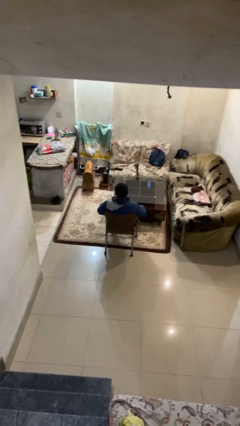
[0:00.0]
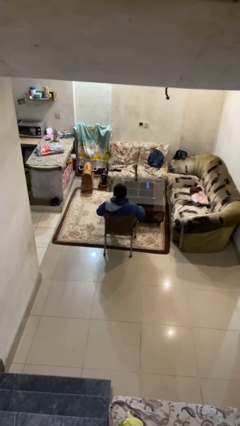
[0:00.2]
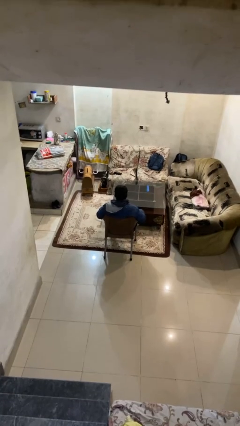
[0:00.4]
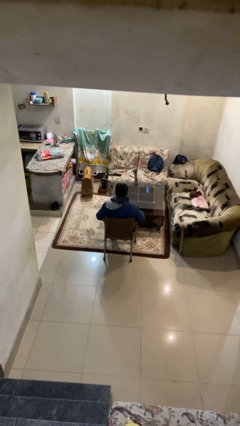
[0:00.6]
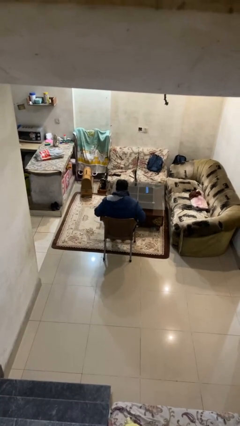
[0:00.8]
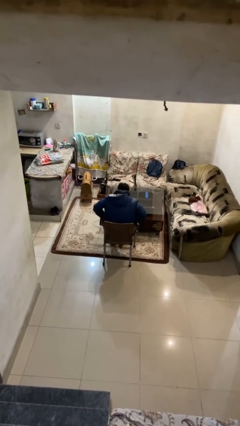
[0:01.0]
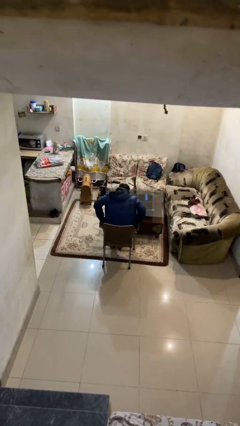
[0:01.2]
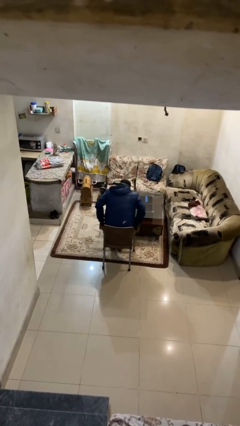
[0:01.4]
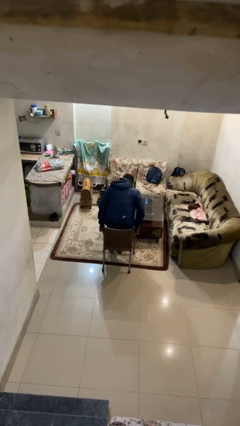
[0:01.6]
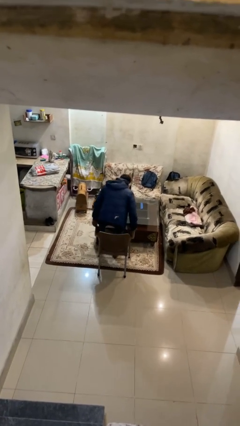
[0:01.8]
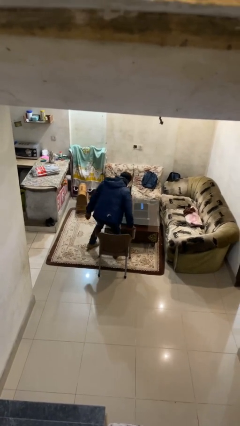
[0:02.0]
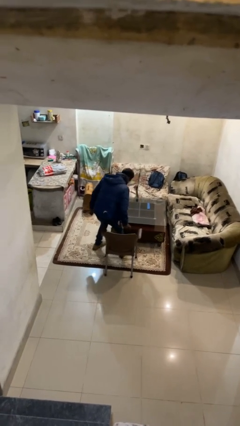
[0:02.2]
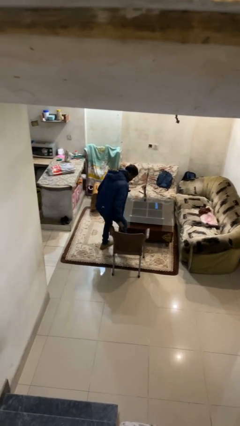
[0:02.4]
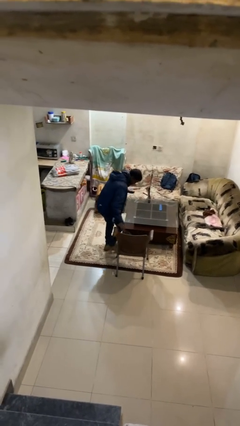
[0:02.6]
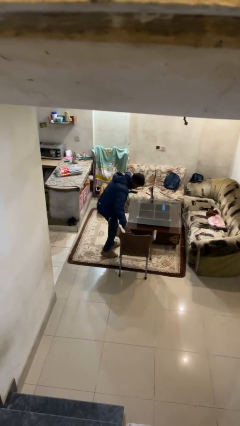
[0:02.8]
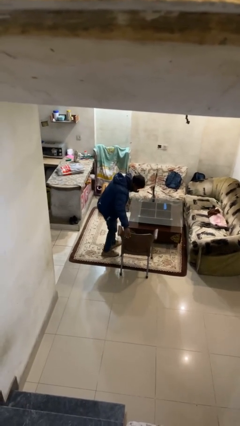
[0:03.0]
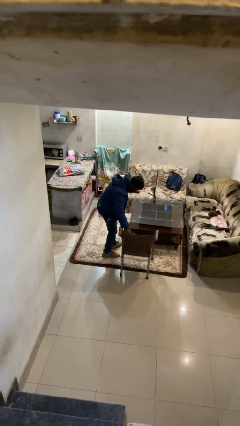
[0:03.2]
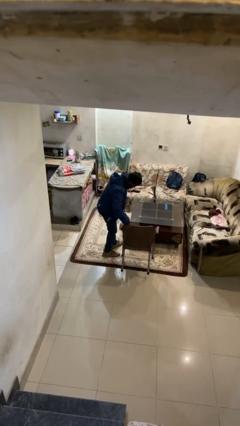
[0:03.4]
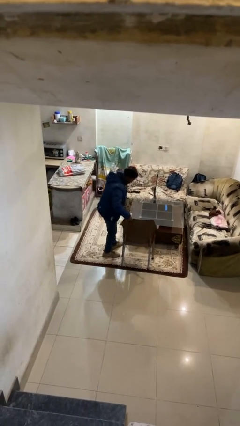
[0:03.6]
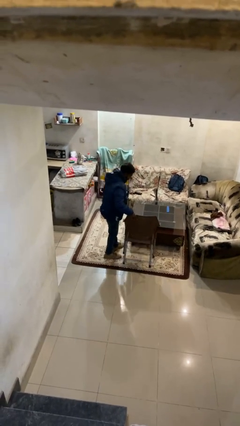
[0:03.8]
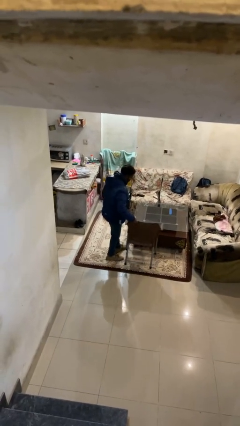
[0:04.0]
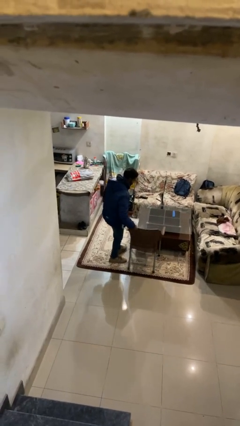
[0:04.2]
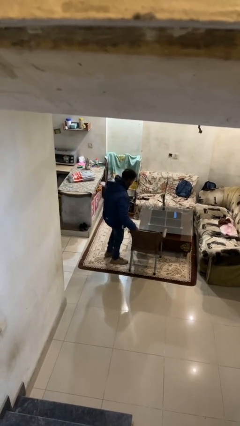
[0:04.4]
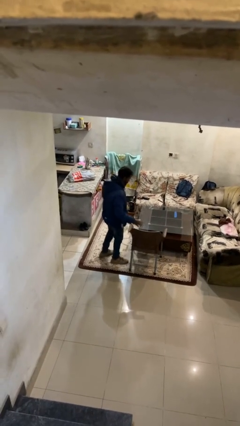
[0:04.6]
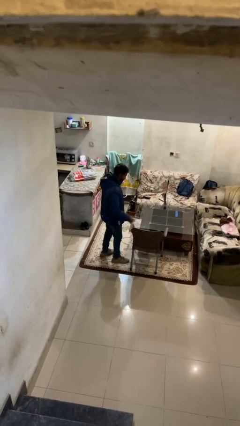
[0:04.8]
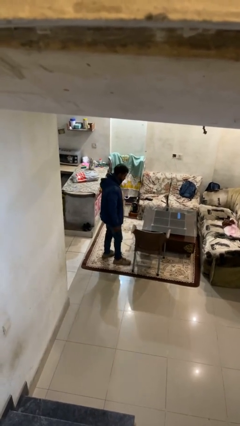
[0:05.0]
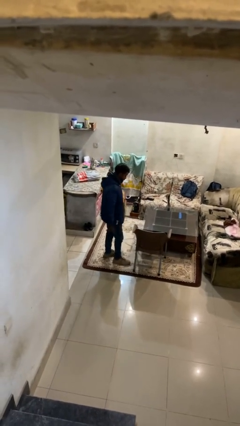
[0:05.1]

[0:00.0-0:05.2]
person stands up

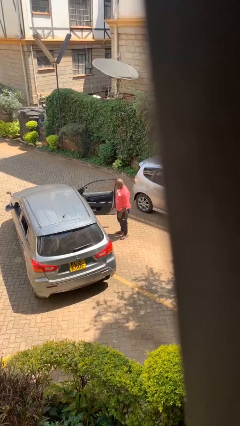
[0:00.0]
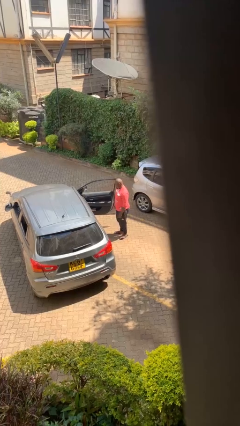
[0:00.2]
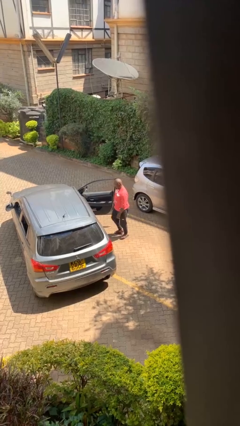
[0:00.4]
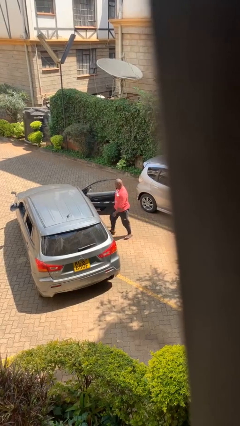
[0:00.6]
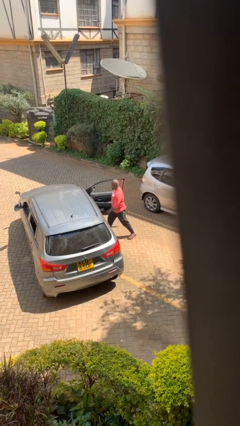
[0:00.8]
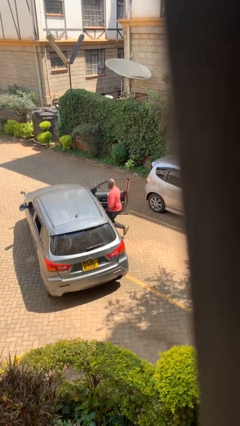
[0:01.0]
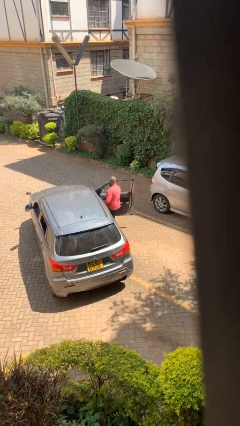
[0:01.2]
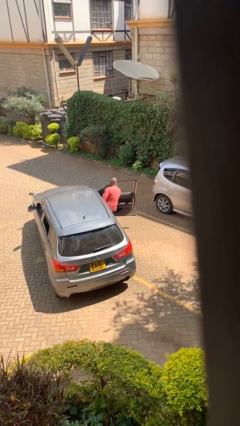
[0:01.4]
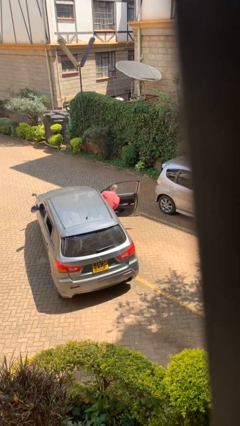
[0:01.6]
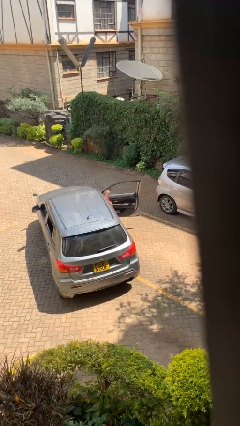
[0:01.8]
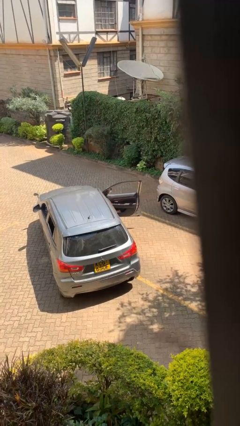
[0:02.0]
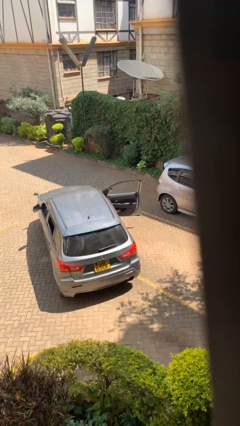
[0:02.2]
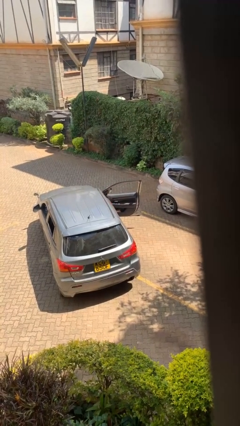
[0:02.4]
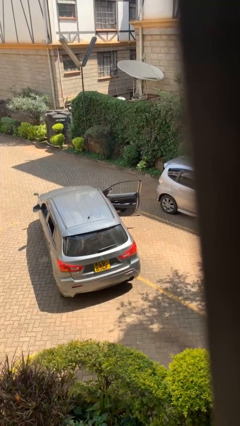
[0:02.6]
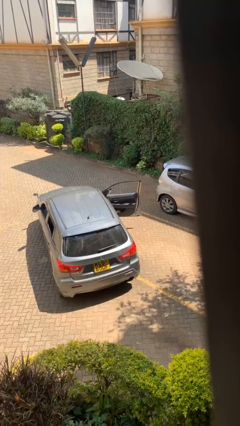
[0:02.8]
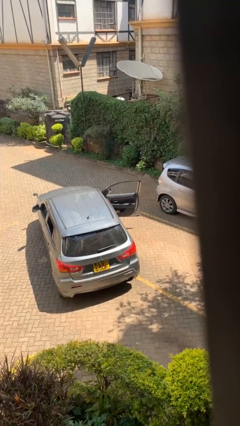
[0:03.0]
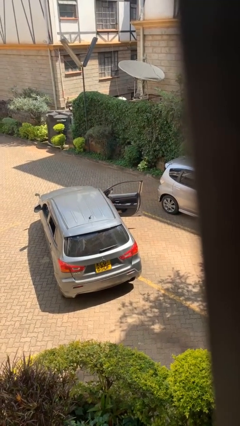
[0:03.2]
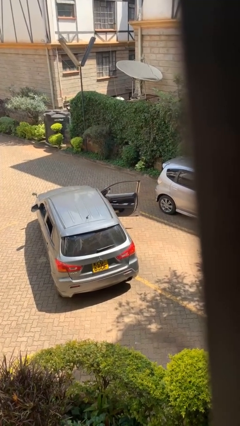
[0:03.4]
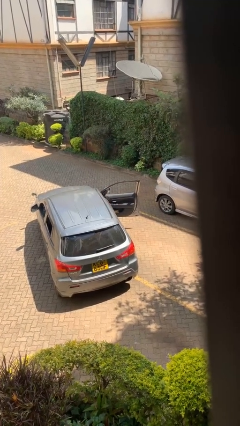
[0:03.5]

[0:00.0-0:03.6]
person enters car

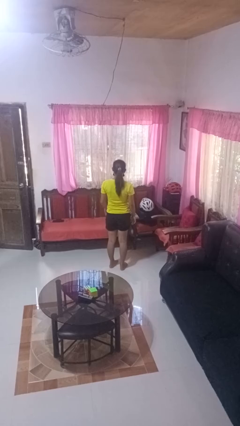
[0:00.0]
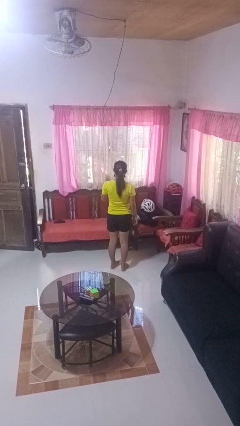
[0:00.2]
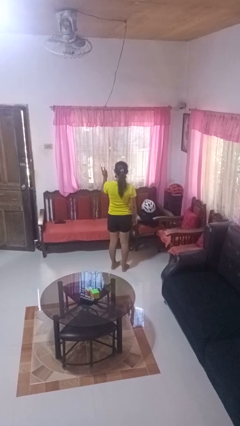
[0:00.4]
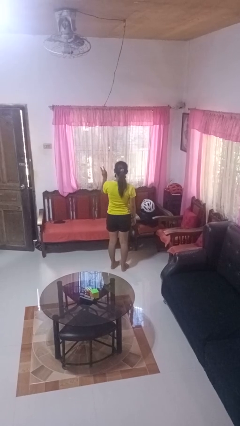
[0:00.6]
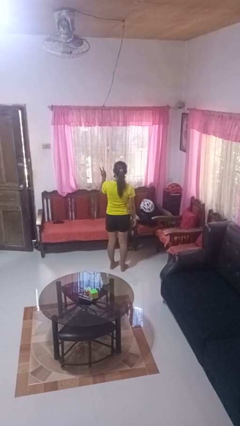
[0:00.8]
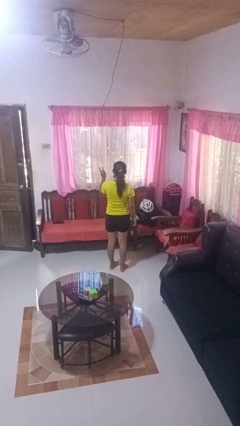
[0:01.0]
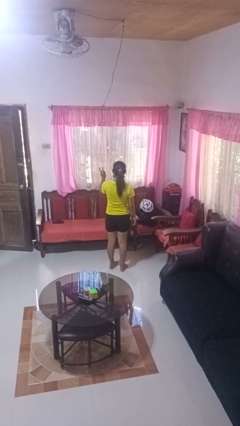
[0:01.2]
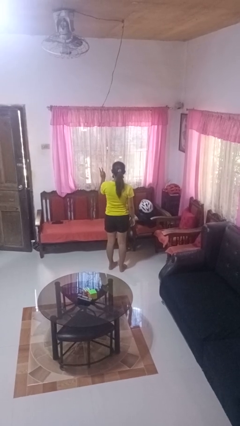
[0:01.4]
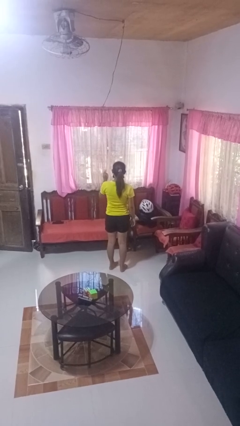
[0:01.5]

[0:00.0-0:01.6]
person gestures number three

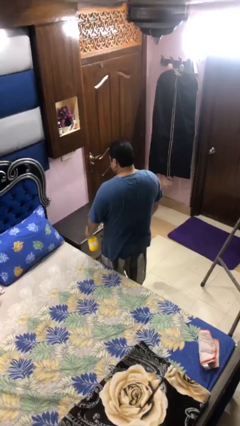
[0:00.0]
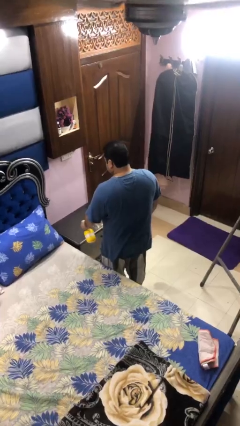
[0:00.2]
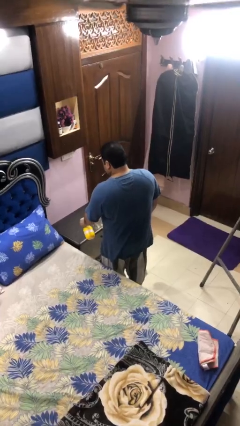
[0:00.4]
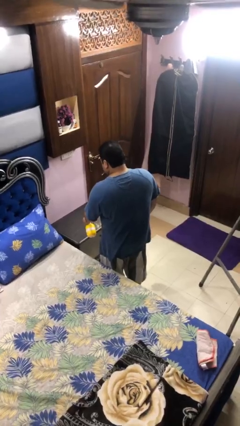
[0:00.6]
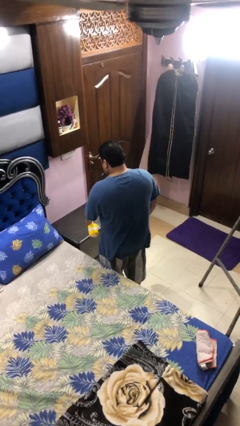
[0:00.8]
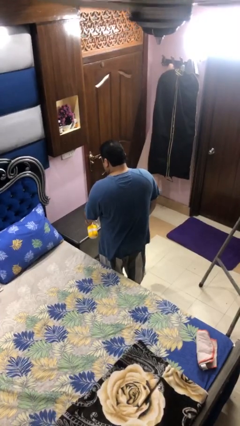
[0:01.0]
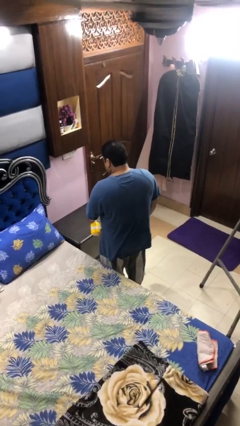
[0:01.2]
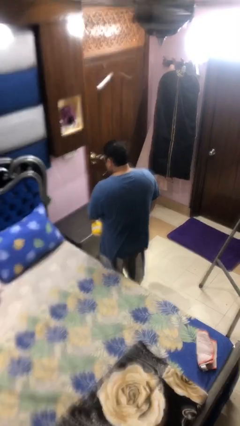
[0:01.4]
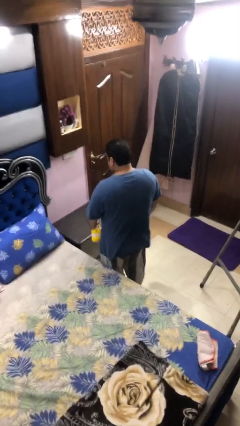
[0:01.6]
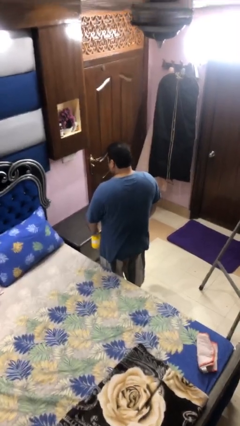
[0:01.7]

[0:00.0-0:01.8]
person sprays from bottle

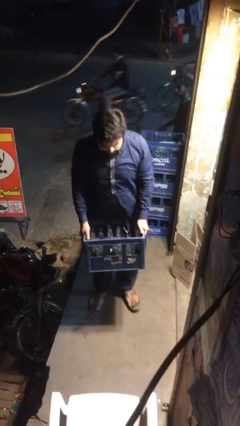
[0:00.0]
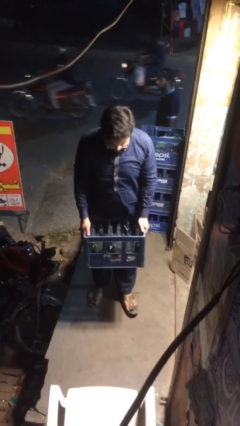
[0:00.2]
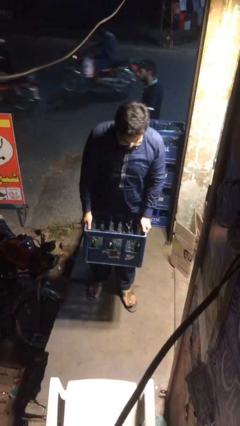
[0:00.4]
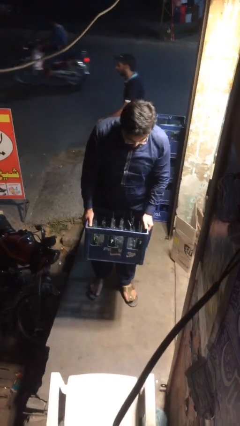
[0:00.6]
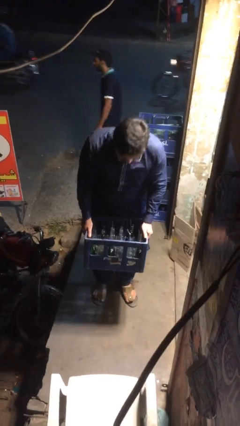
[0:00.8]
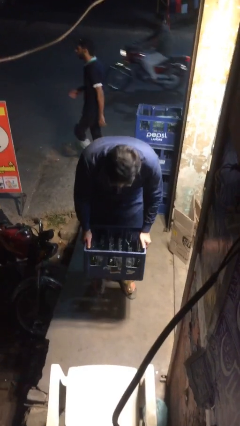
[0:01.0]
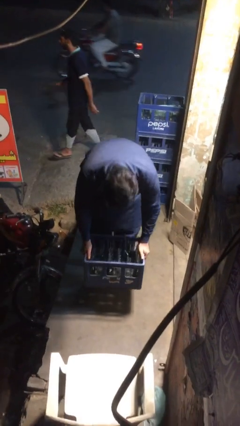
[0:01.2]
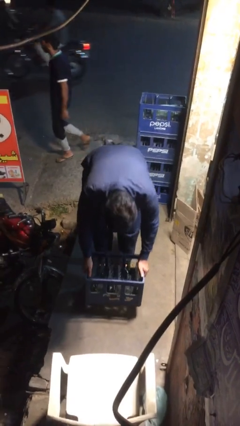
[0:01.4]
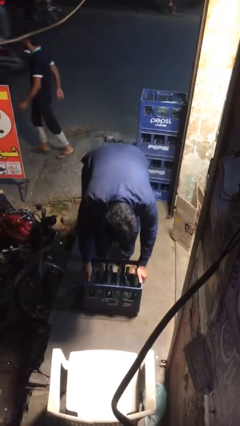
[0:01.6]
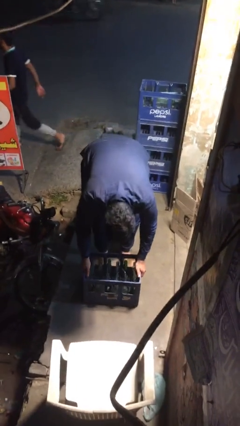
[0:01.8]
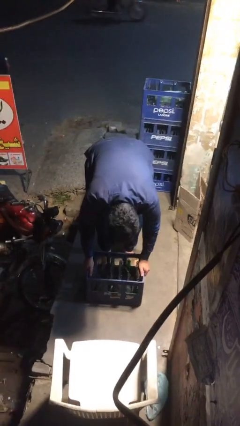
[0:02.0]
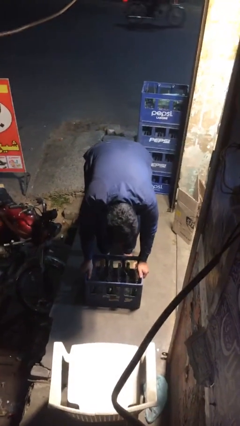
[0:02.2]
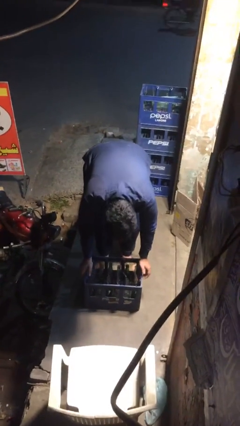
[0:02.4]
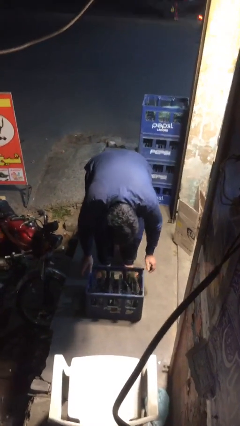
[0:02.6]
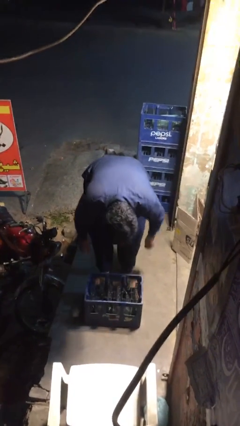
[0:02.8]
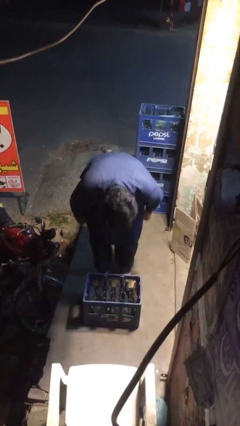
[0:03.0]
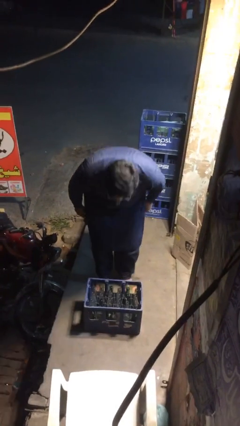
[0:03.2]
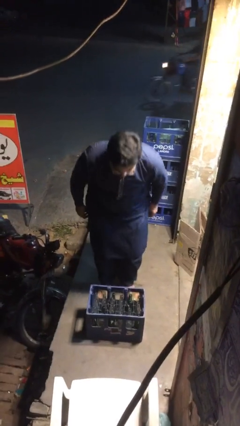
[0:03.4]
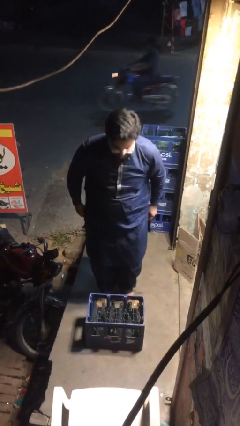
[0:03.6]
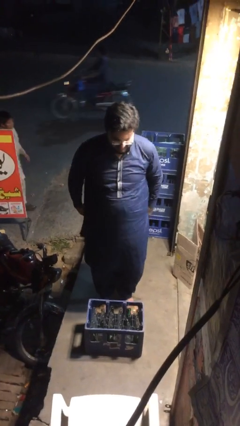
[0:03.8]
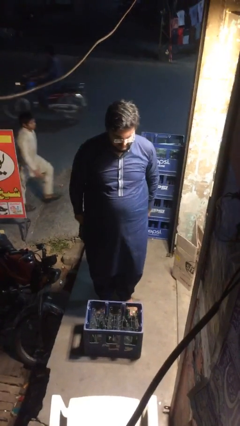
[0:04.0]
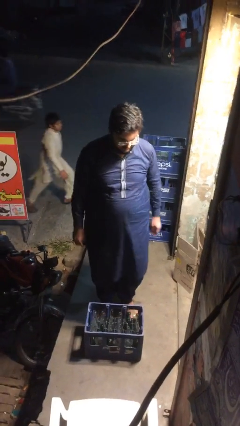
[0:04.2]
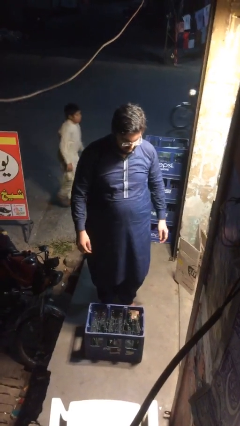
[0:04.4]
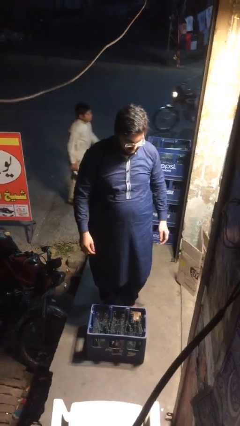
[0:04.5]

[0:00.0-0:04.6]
person puts down object on floor

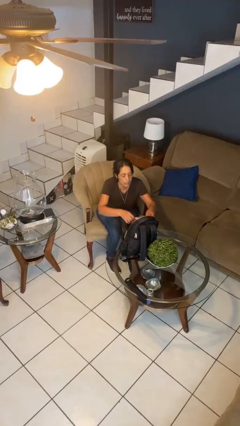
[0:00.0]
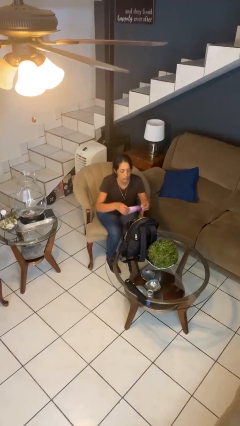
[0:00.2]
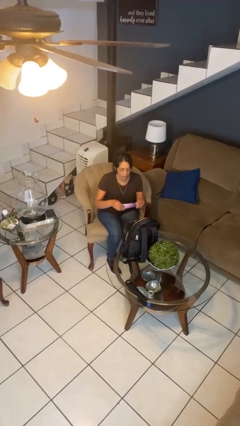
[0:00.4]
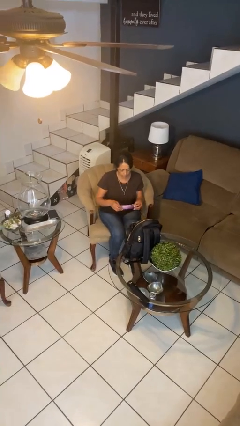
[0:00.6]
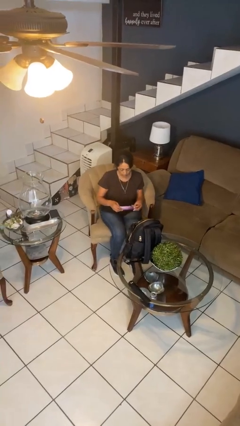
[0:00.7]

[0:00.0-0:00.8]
person takes object from backpack
